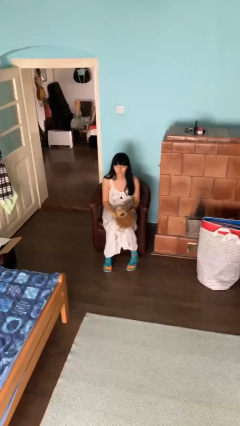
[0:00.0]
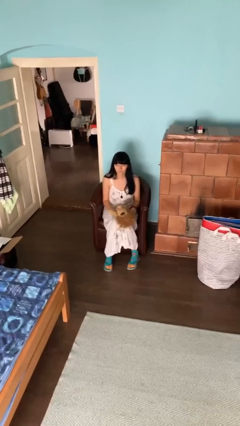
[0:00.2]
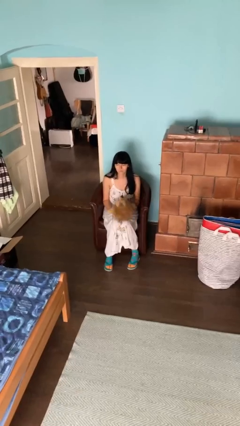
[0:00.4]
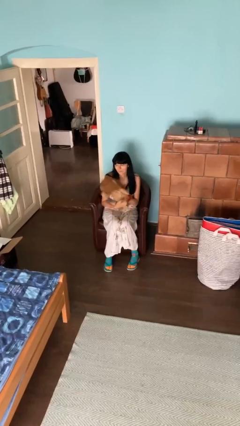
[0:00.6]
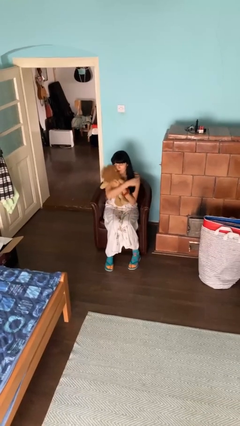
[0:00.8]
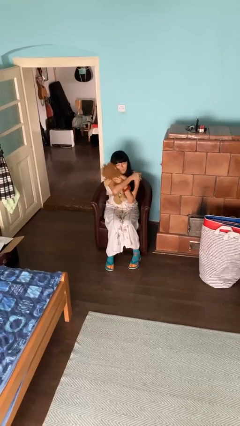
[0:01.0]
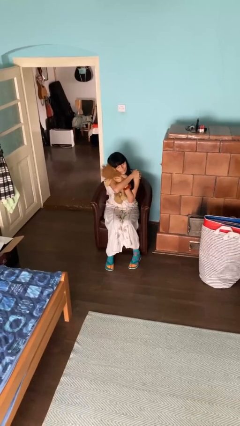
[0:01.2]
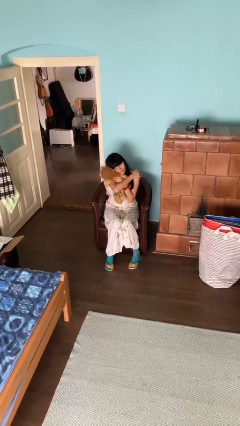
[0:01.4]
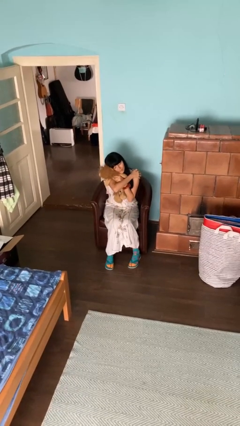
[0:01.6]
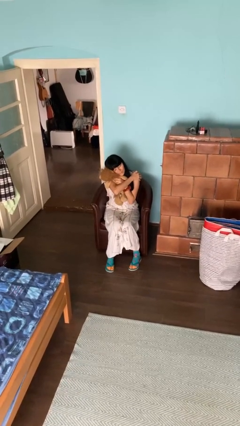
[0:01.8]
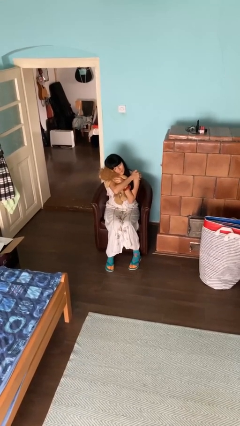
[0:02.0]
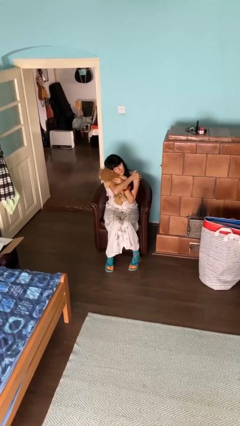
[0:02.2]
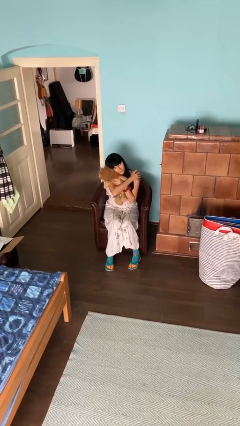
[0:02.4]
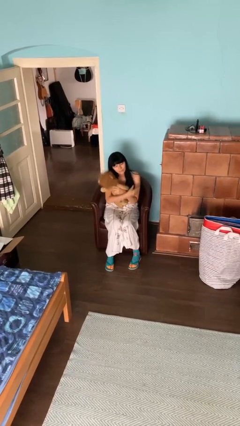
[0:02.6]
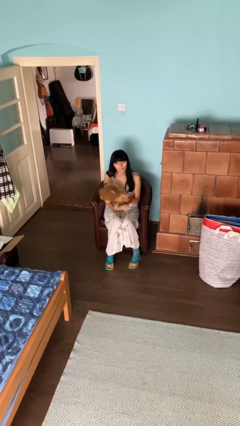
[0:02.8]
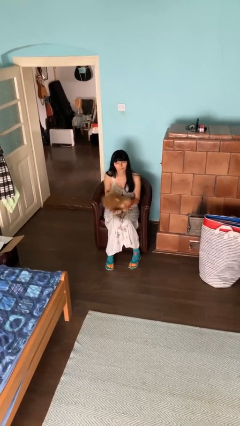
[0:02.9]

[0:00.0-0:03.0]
person hugs stuffed animal

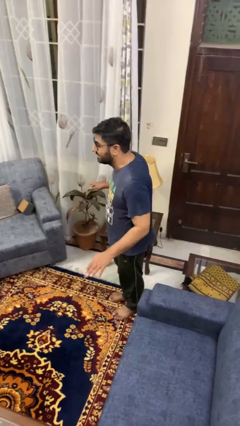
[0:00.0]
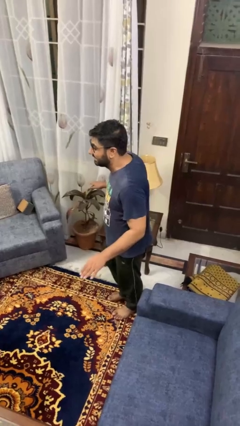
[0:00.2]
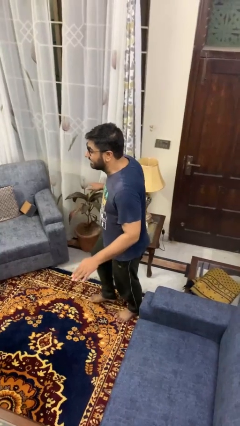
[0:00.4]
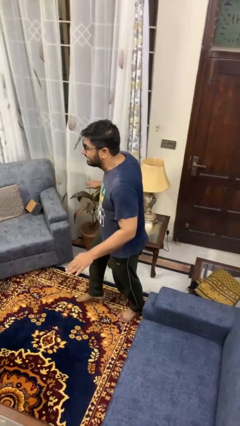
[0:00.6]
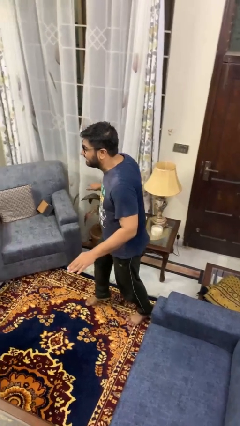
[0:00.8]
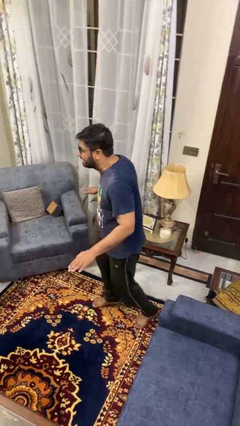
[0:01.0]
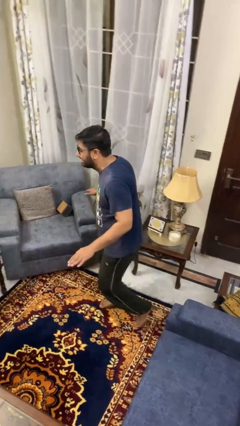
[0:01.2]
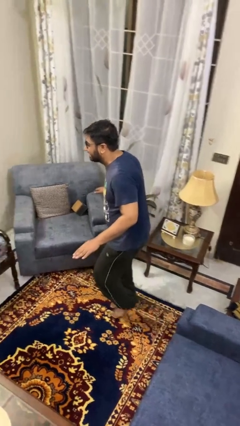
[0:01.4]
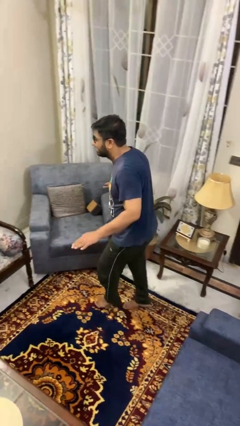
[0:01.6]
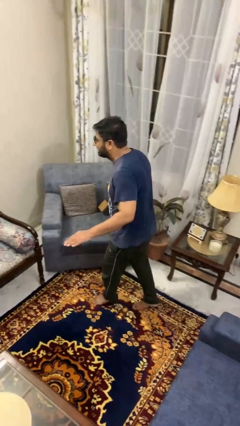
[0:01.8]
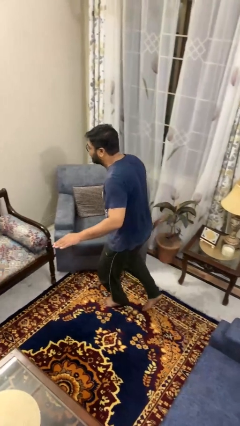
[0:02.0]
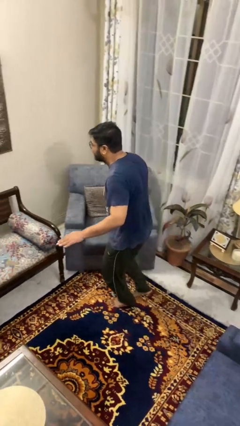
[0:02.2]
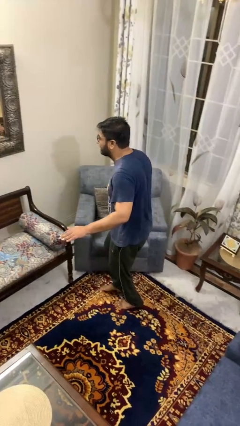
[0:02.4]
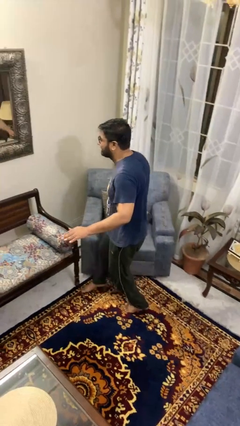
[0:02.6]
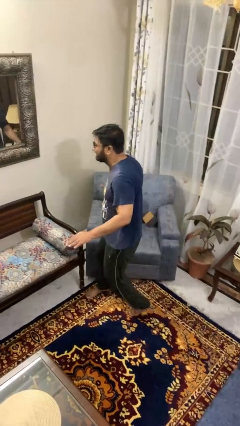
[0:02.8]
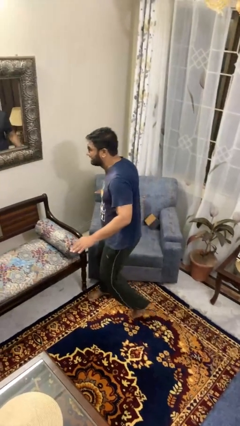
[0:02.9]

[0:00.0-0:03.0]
person walks tiptoe

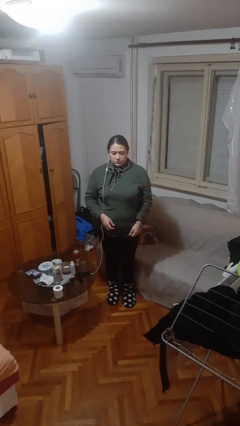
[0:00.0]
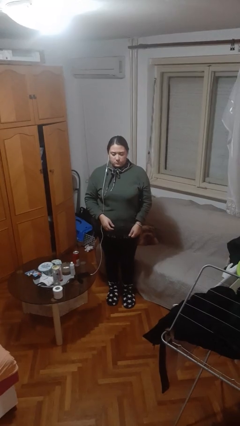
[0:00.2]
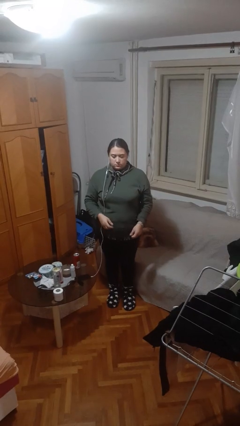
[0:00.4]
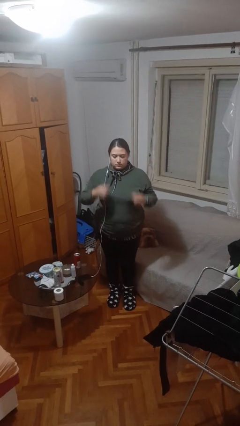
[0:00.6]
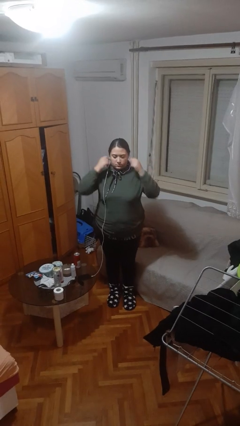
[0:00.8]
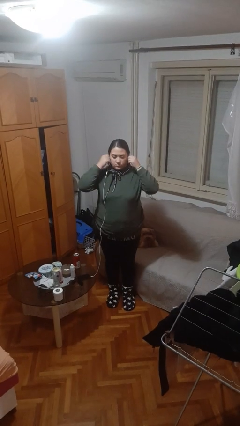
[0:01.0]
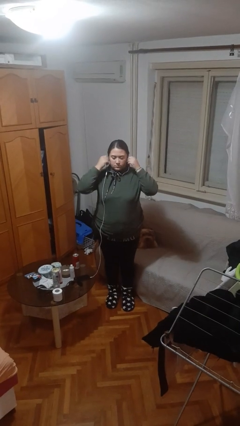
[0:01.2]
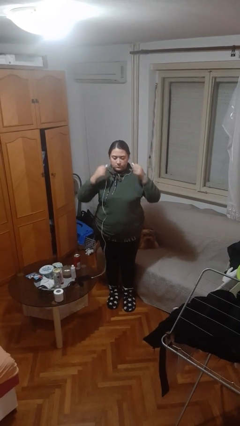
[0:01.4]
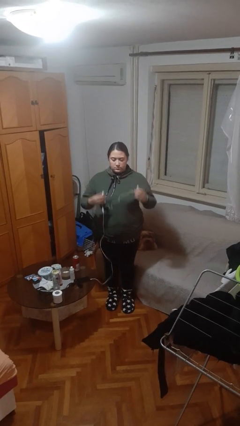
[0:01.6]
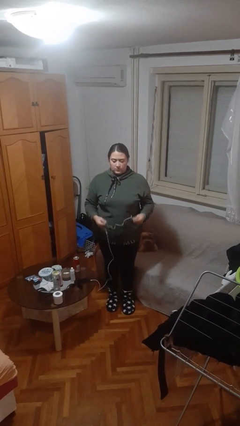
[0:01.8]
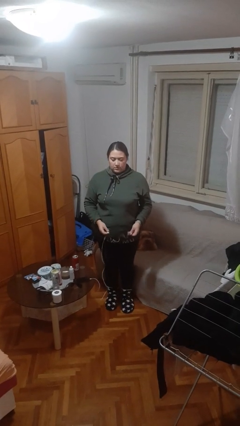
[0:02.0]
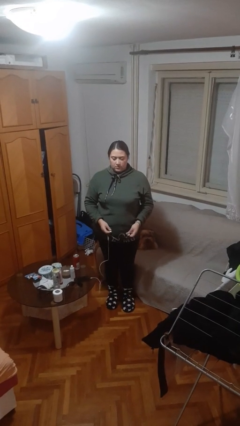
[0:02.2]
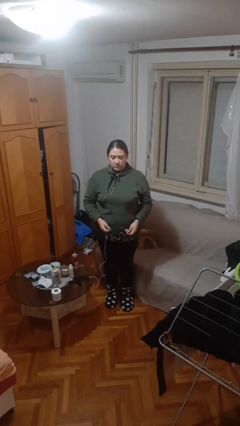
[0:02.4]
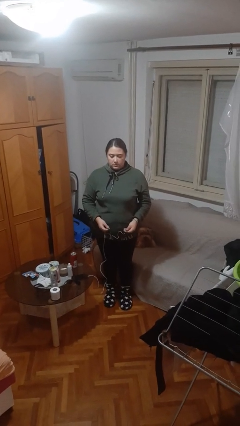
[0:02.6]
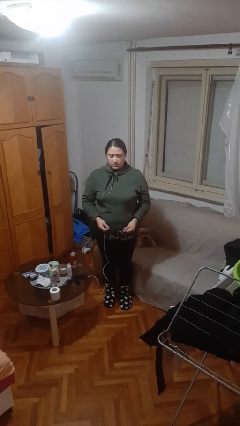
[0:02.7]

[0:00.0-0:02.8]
person takes off headphones

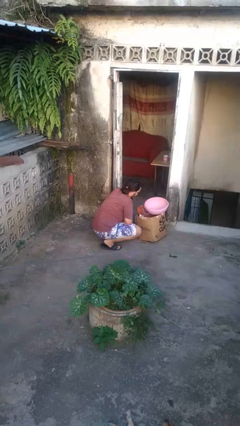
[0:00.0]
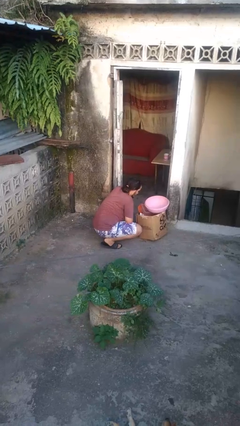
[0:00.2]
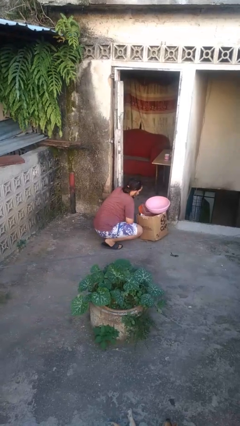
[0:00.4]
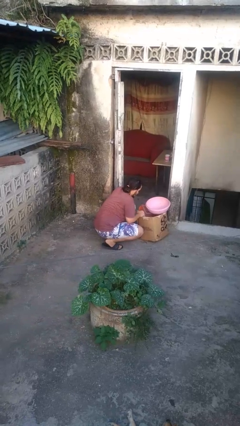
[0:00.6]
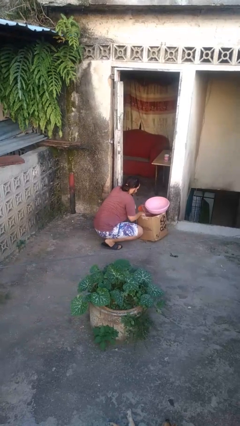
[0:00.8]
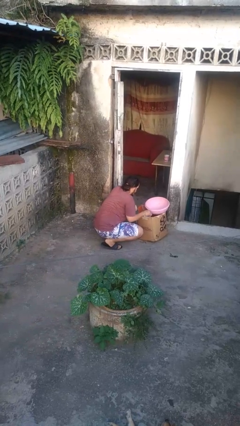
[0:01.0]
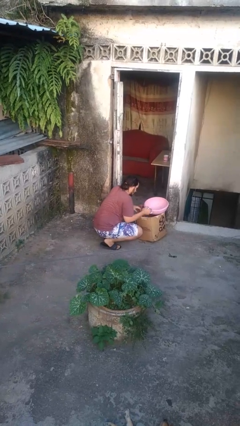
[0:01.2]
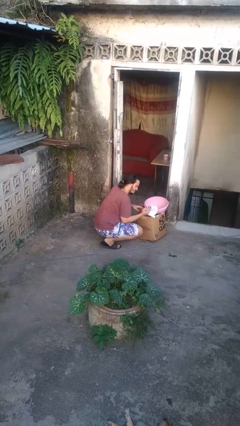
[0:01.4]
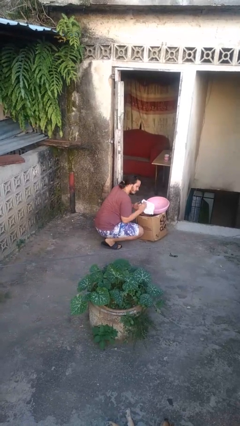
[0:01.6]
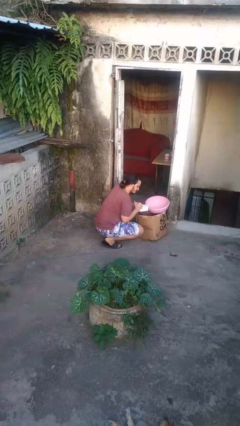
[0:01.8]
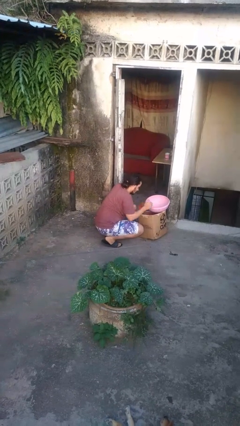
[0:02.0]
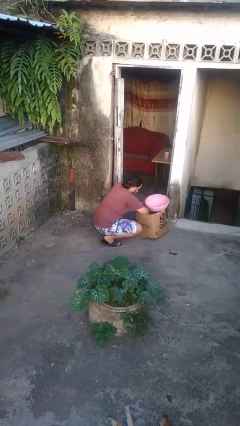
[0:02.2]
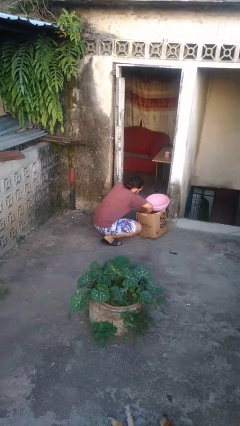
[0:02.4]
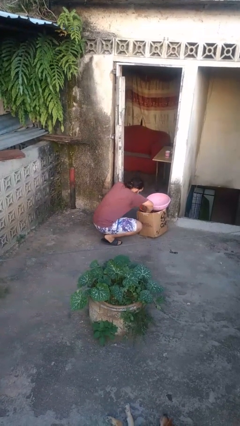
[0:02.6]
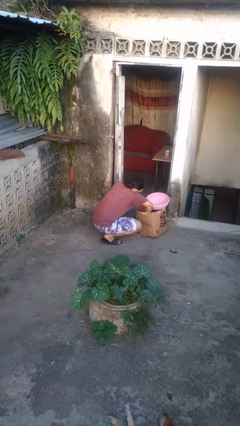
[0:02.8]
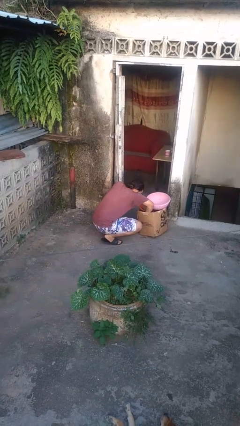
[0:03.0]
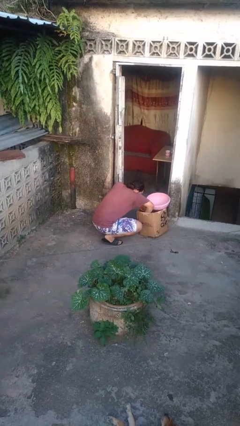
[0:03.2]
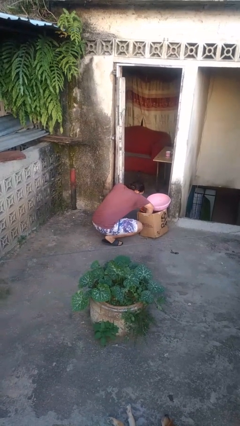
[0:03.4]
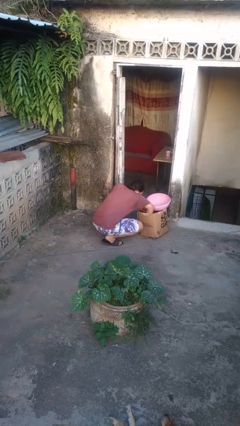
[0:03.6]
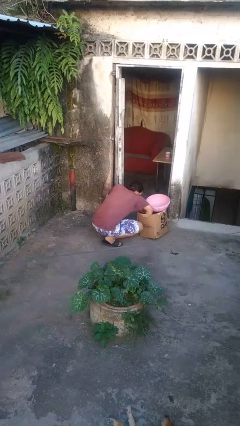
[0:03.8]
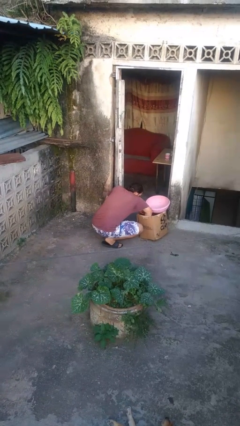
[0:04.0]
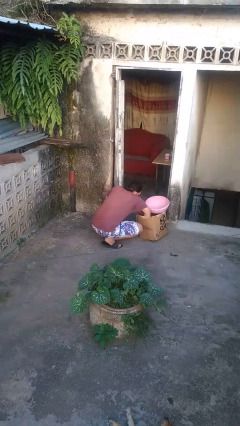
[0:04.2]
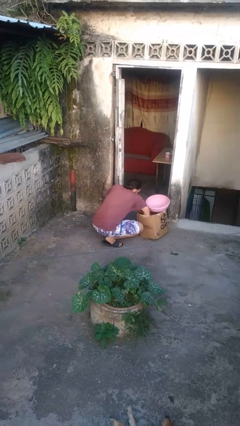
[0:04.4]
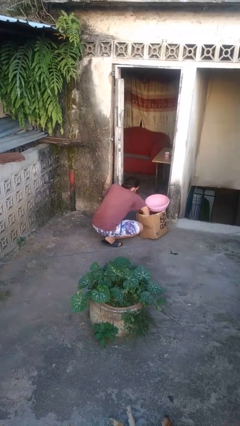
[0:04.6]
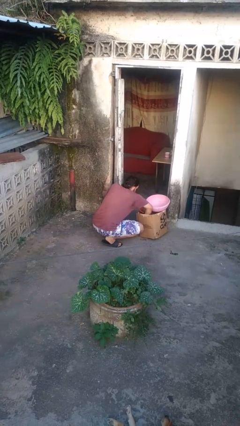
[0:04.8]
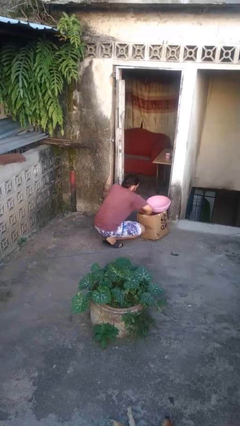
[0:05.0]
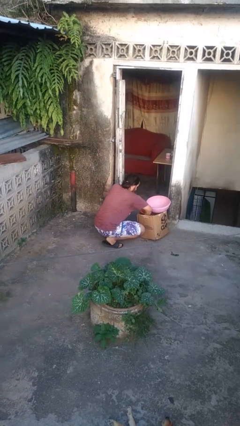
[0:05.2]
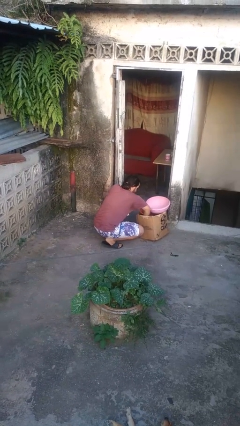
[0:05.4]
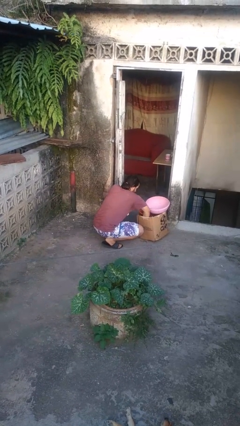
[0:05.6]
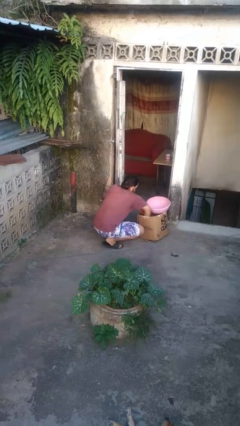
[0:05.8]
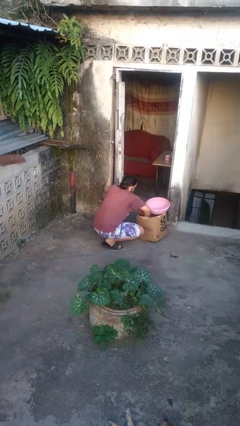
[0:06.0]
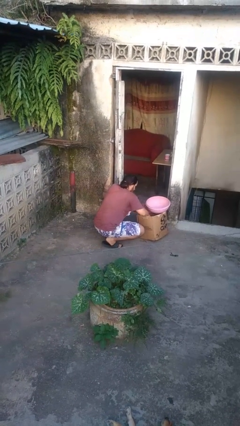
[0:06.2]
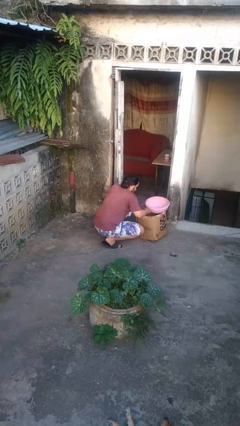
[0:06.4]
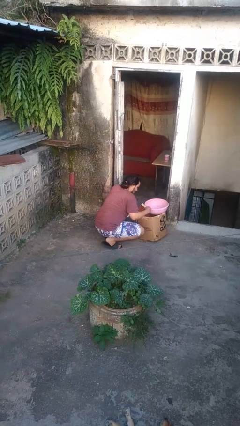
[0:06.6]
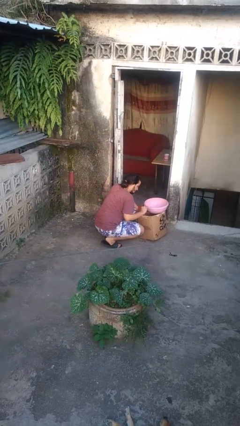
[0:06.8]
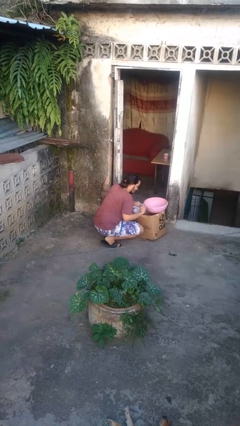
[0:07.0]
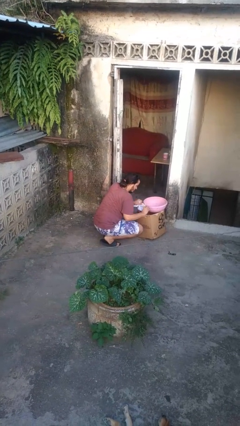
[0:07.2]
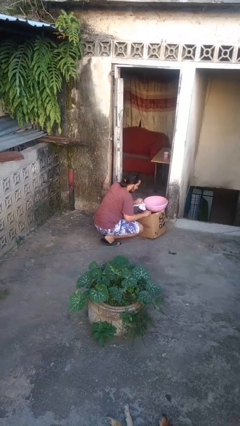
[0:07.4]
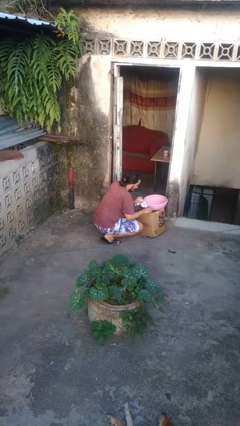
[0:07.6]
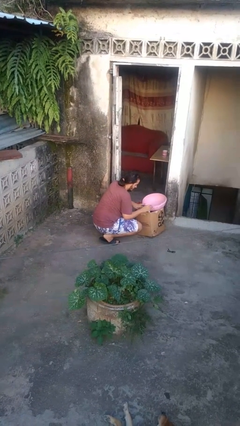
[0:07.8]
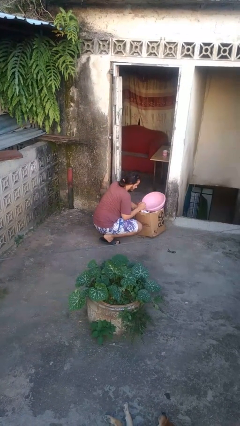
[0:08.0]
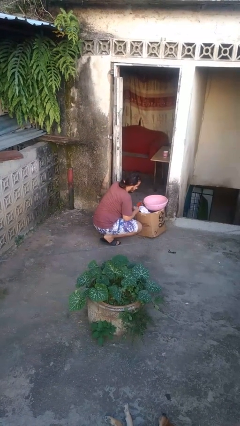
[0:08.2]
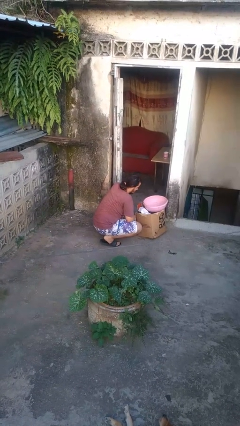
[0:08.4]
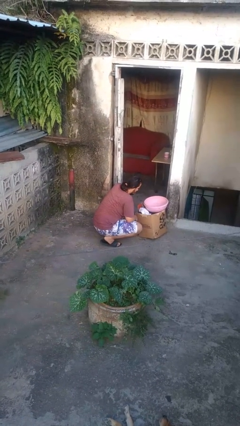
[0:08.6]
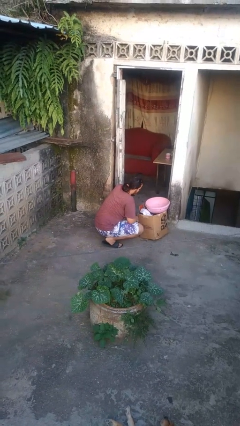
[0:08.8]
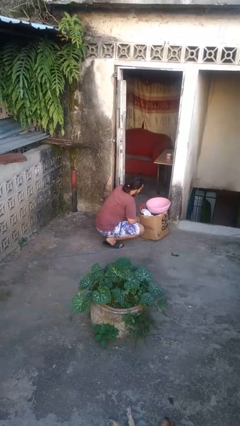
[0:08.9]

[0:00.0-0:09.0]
person searches in box

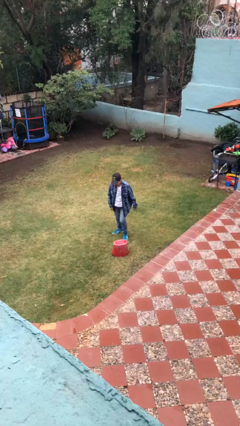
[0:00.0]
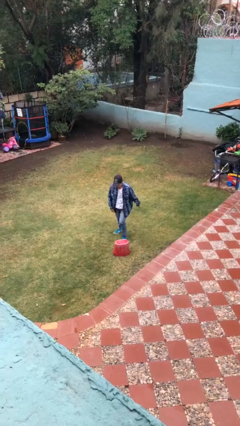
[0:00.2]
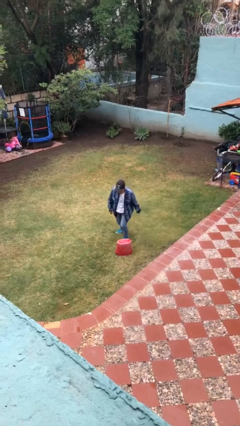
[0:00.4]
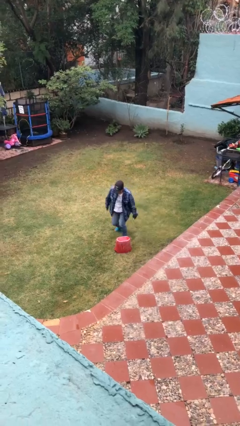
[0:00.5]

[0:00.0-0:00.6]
person trips on object on floor
